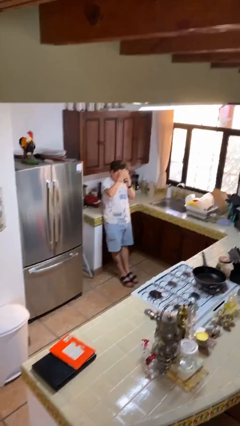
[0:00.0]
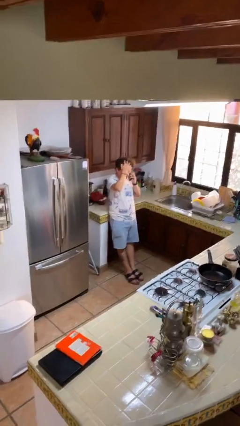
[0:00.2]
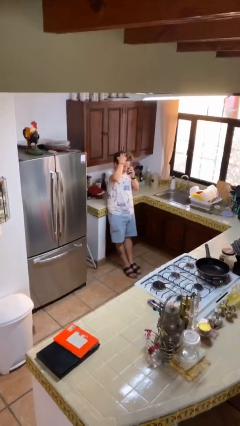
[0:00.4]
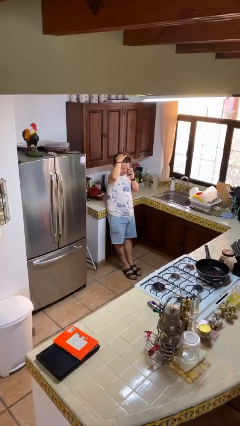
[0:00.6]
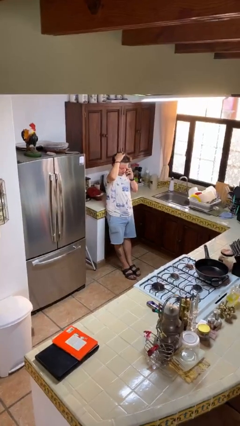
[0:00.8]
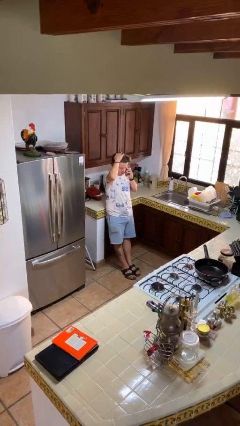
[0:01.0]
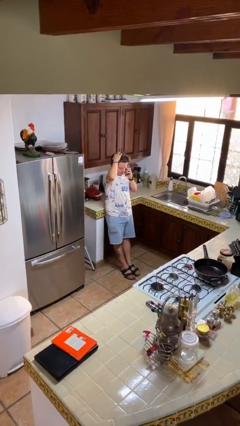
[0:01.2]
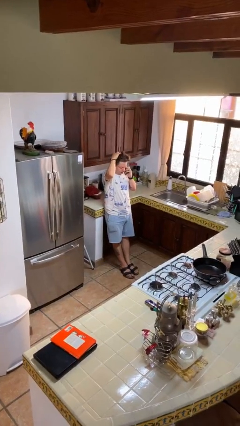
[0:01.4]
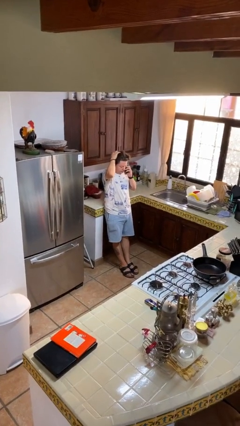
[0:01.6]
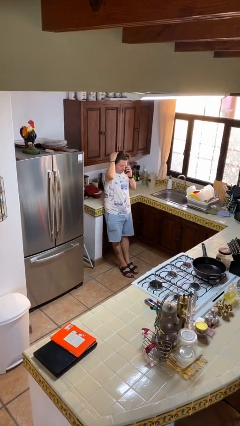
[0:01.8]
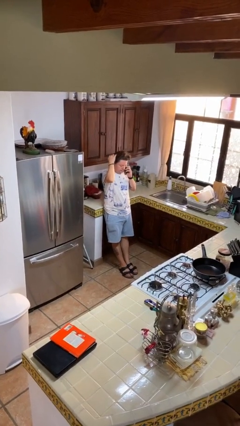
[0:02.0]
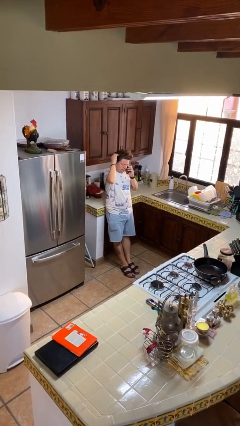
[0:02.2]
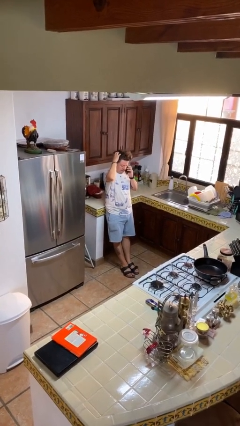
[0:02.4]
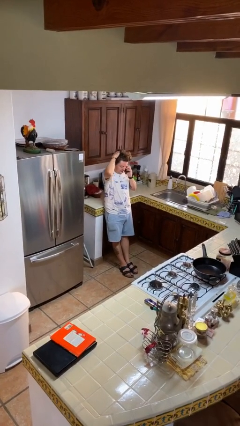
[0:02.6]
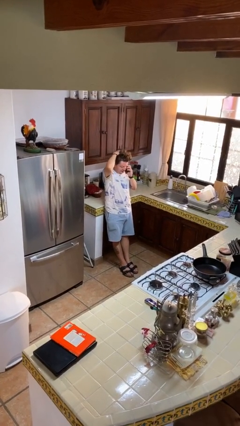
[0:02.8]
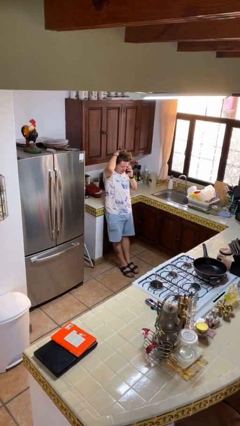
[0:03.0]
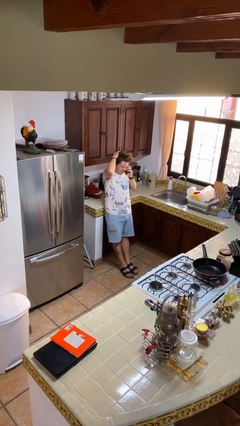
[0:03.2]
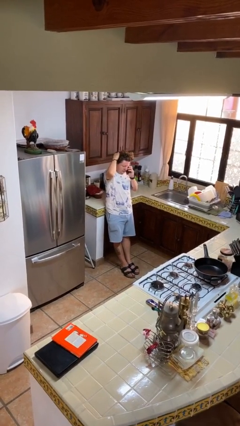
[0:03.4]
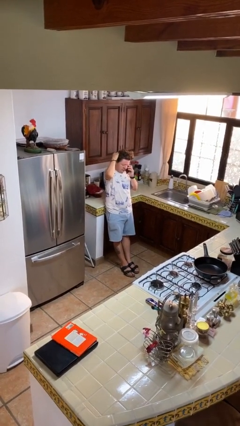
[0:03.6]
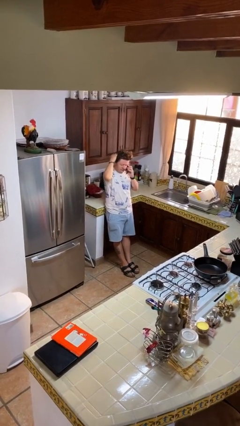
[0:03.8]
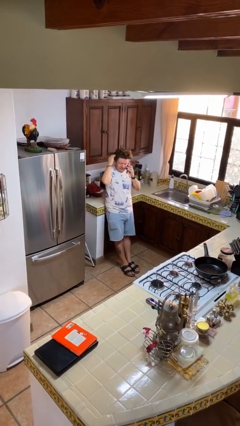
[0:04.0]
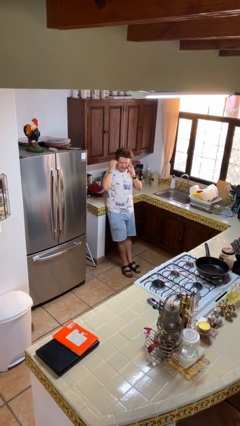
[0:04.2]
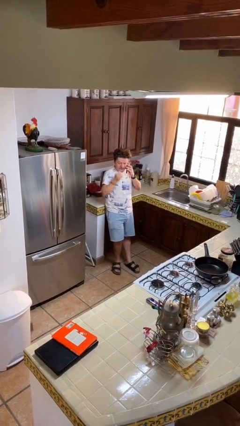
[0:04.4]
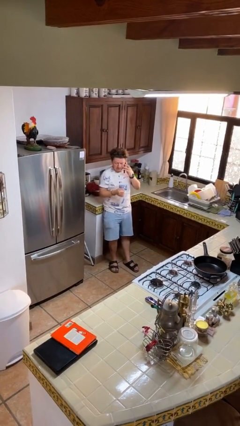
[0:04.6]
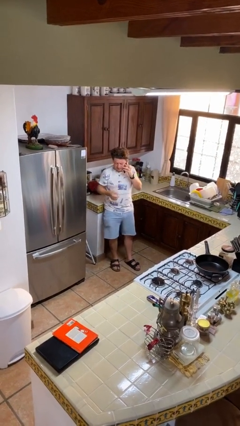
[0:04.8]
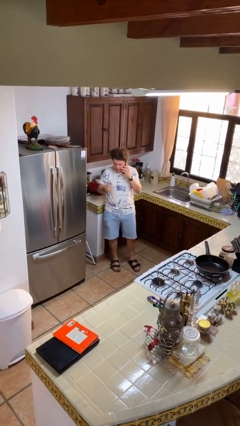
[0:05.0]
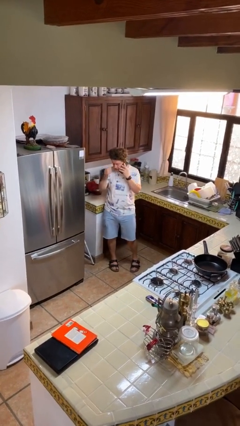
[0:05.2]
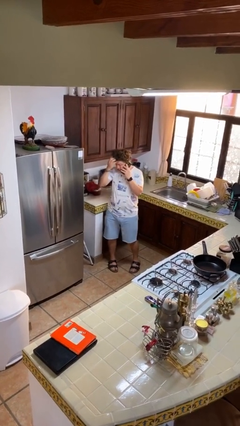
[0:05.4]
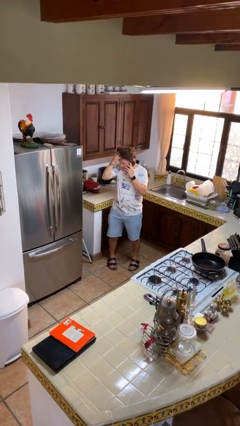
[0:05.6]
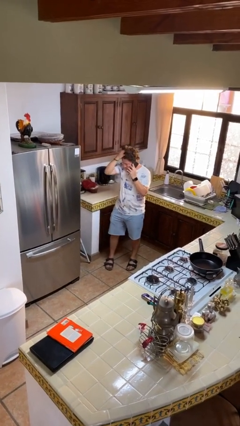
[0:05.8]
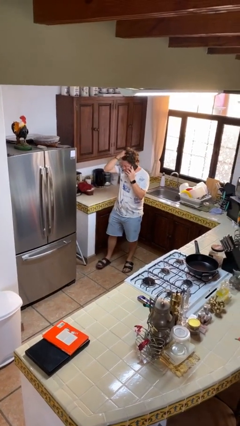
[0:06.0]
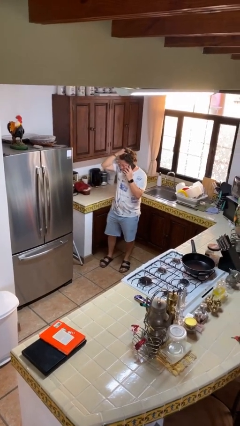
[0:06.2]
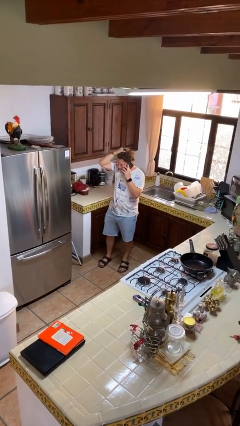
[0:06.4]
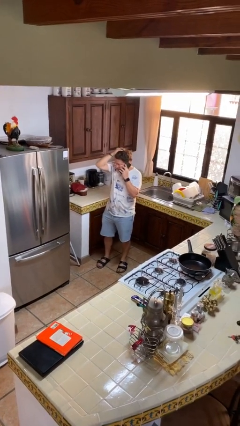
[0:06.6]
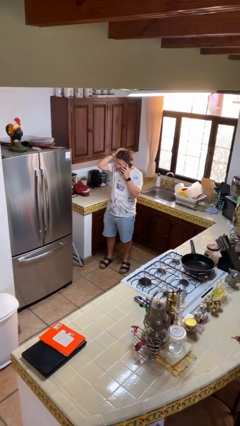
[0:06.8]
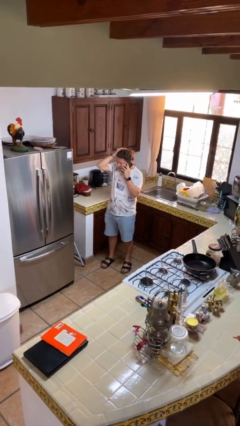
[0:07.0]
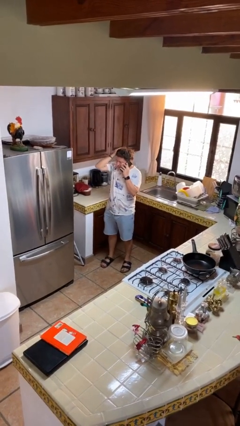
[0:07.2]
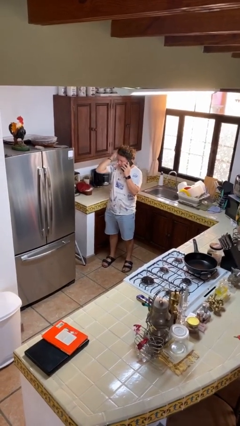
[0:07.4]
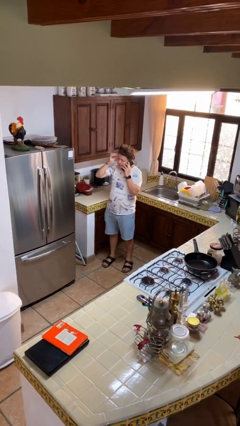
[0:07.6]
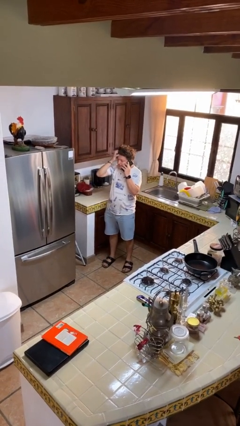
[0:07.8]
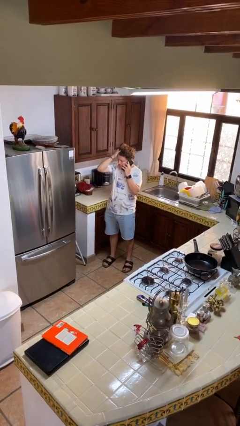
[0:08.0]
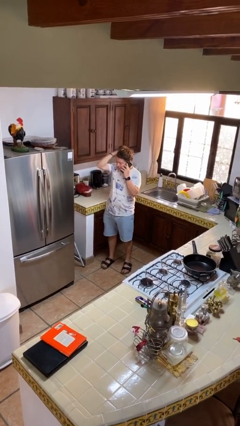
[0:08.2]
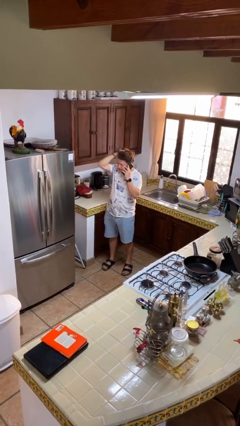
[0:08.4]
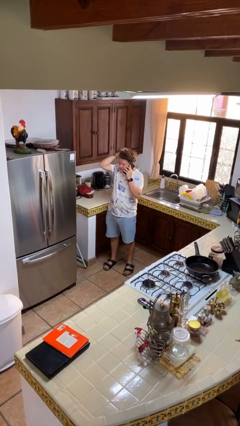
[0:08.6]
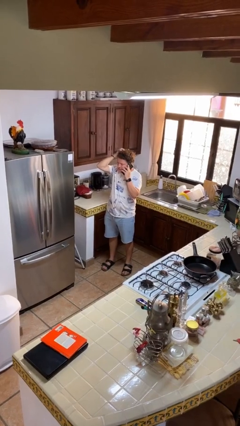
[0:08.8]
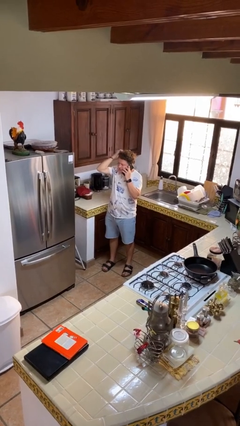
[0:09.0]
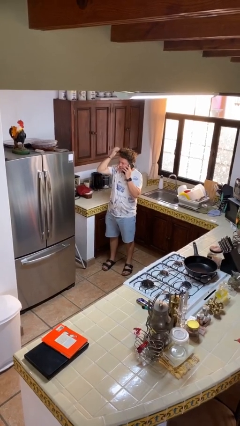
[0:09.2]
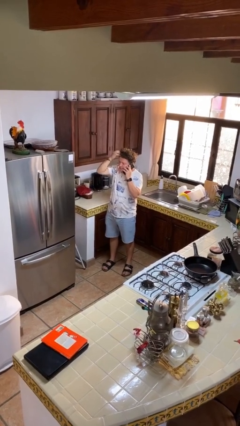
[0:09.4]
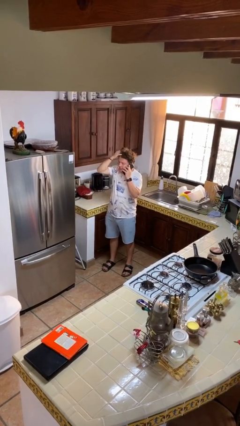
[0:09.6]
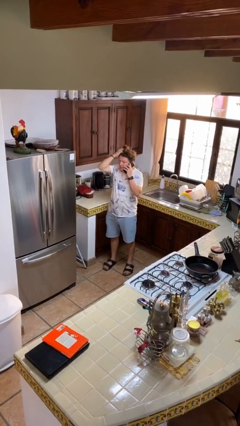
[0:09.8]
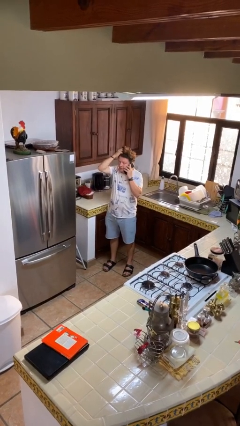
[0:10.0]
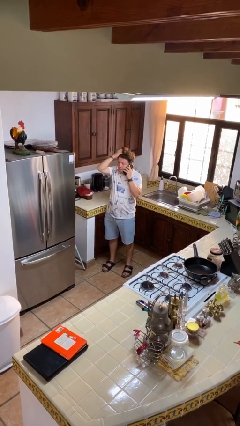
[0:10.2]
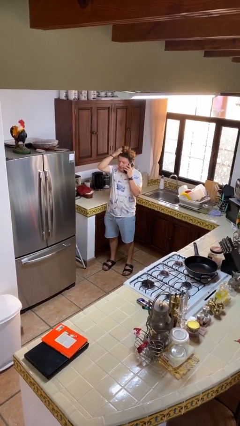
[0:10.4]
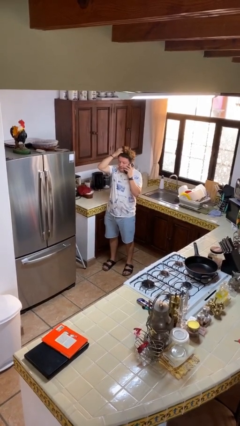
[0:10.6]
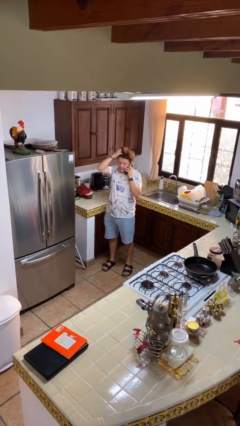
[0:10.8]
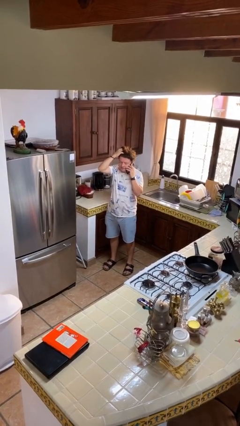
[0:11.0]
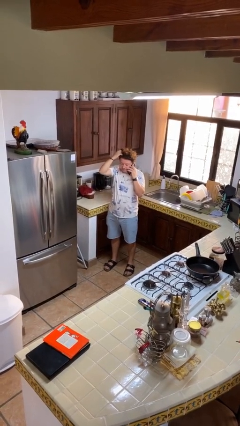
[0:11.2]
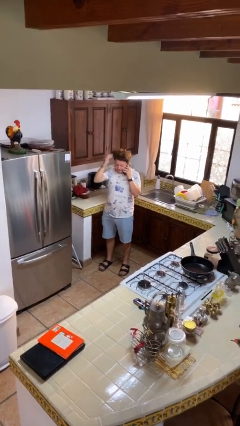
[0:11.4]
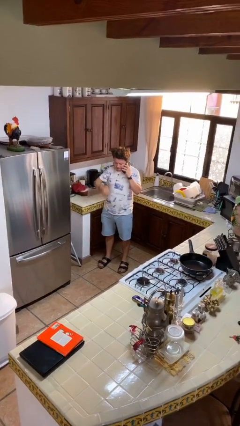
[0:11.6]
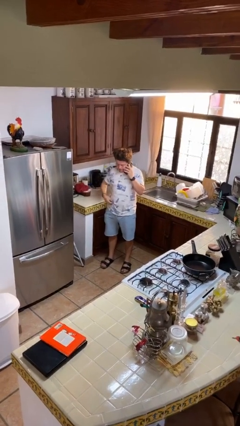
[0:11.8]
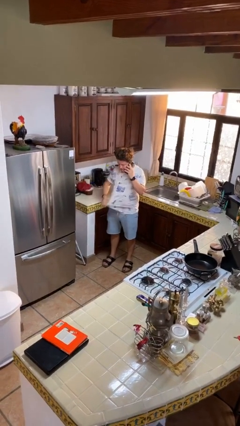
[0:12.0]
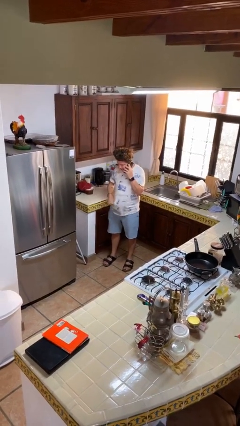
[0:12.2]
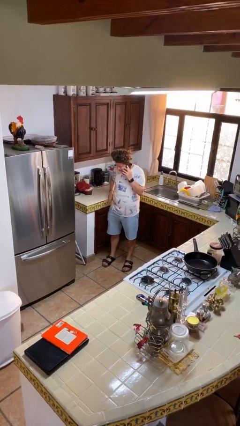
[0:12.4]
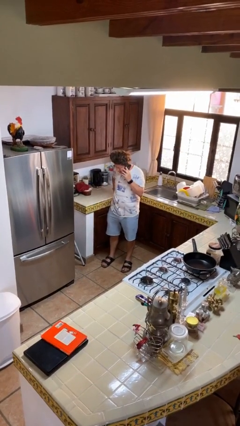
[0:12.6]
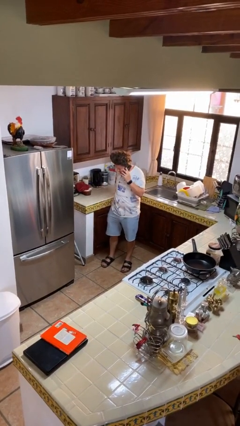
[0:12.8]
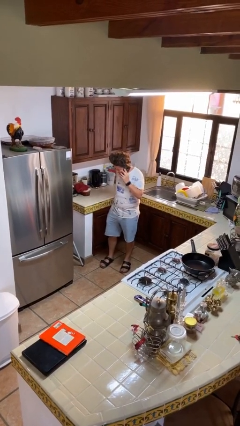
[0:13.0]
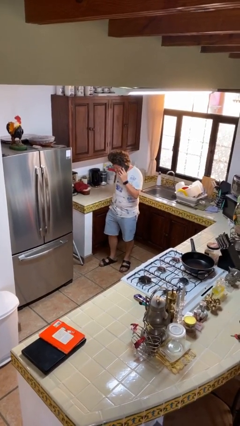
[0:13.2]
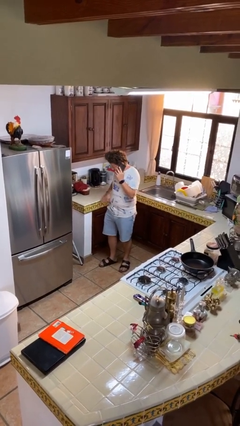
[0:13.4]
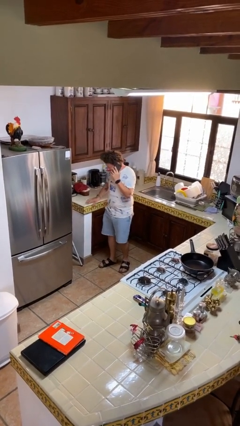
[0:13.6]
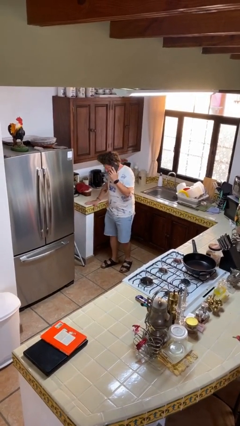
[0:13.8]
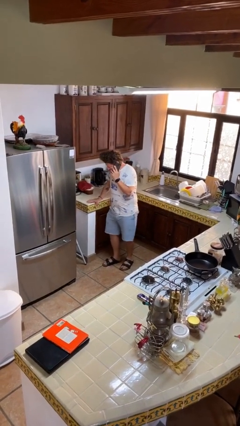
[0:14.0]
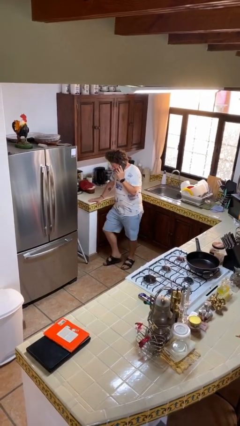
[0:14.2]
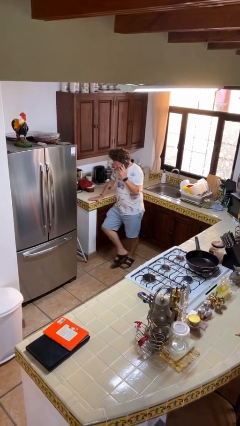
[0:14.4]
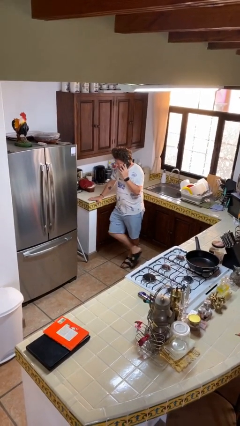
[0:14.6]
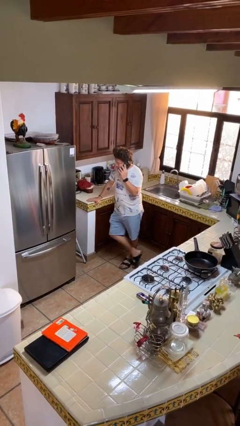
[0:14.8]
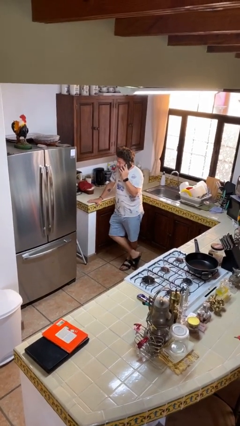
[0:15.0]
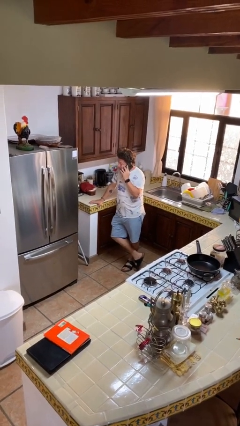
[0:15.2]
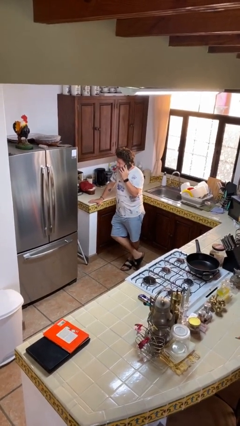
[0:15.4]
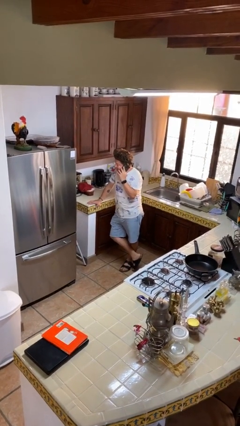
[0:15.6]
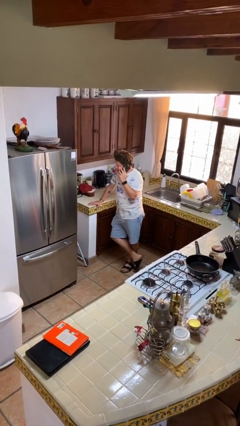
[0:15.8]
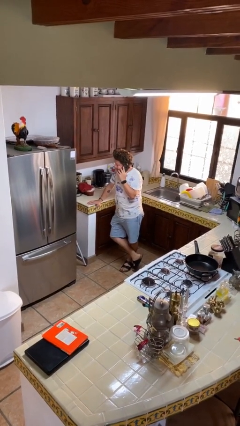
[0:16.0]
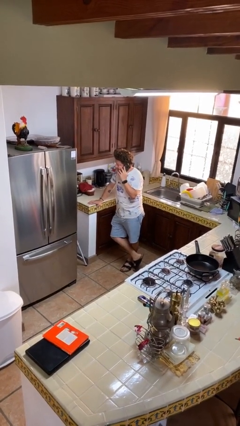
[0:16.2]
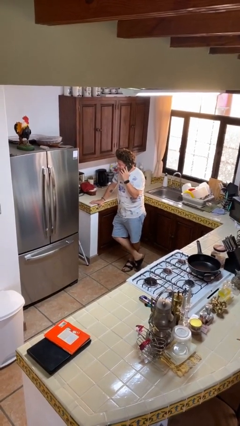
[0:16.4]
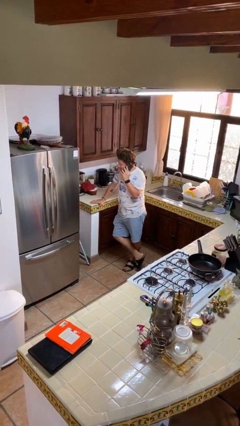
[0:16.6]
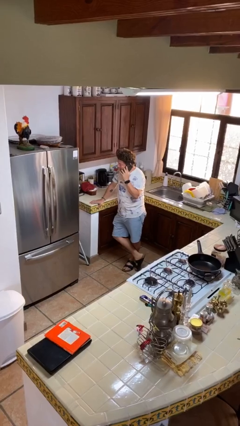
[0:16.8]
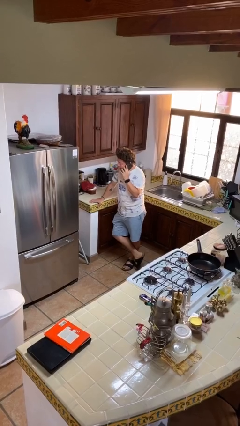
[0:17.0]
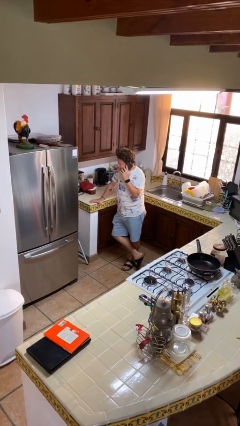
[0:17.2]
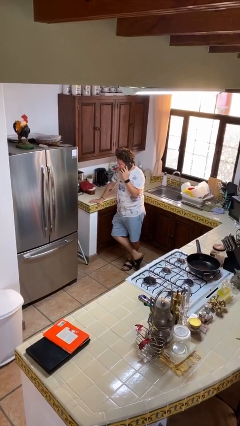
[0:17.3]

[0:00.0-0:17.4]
person talks on phone

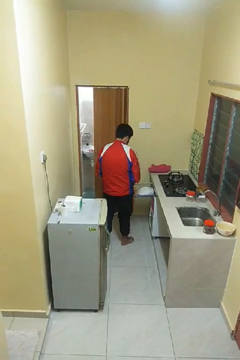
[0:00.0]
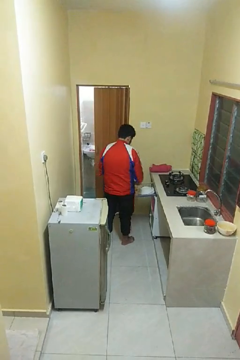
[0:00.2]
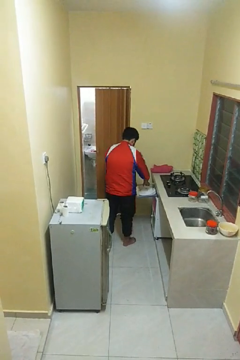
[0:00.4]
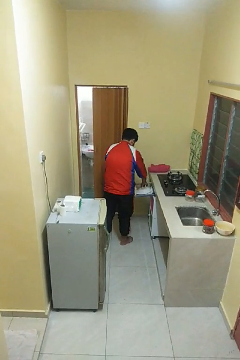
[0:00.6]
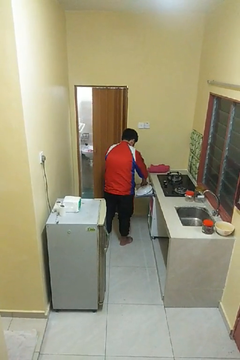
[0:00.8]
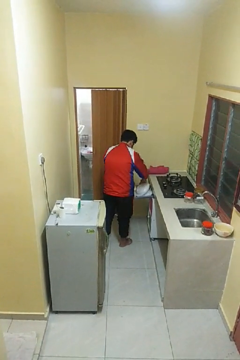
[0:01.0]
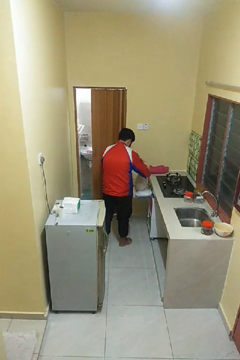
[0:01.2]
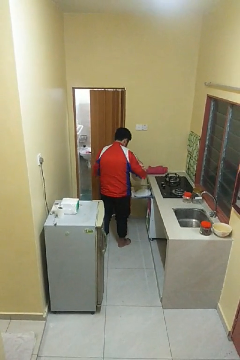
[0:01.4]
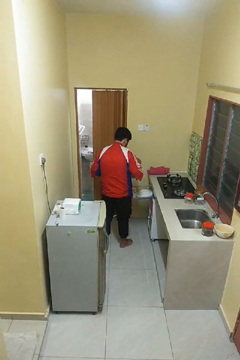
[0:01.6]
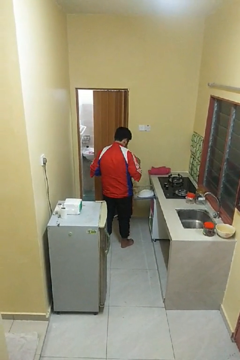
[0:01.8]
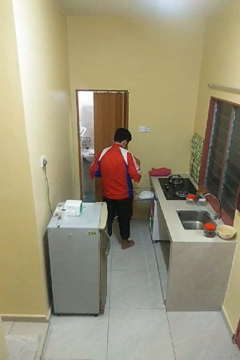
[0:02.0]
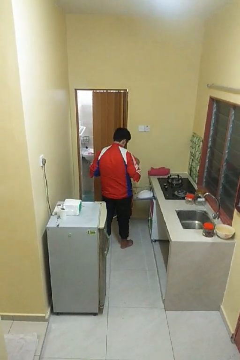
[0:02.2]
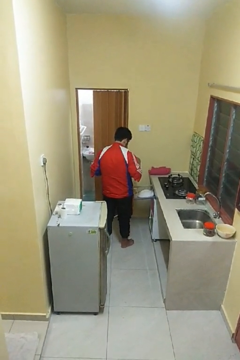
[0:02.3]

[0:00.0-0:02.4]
person takes object from kitchen drawer
